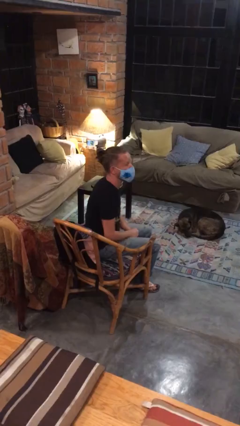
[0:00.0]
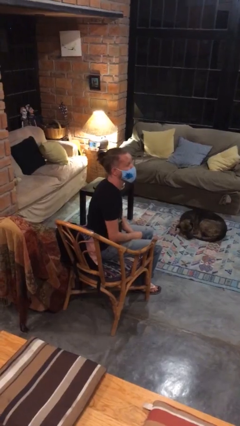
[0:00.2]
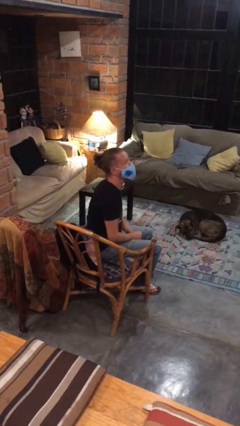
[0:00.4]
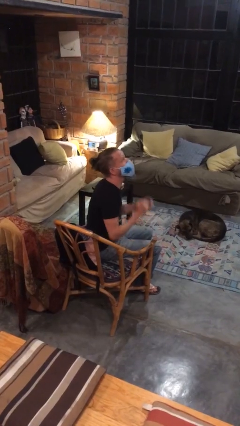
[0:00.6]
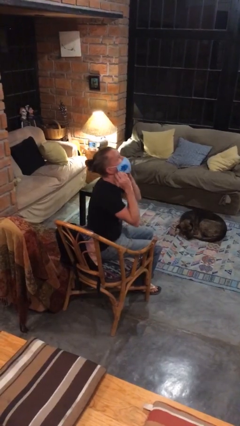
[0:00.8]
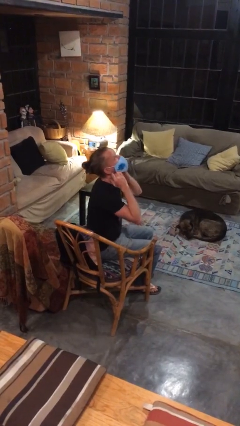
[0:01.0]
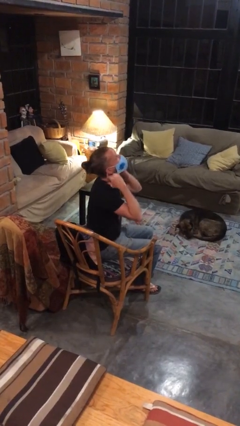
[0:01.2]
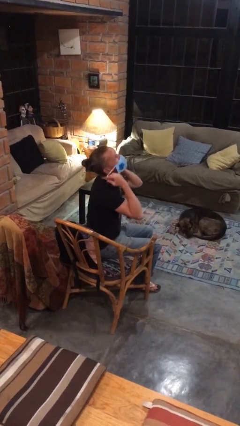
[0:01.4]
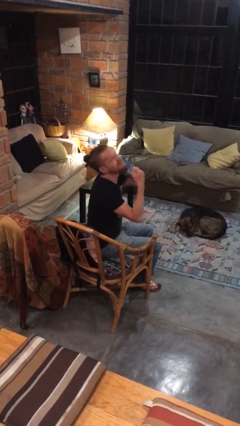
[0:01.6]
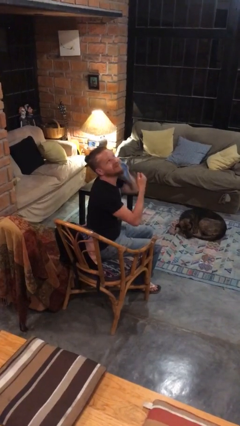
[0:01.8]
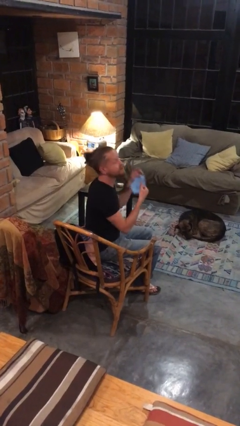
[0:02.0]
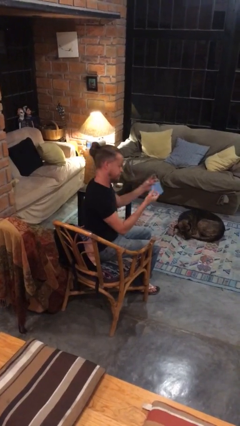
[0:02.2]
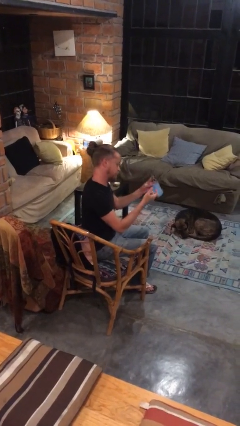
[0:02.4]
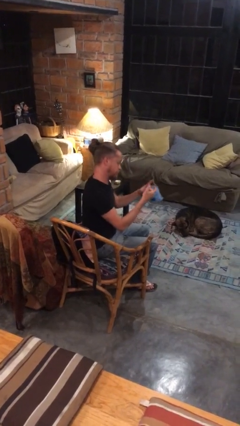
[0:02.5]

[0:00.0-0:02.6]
person takes off facemask

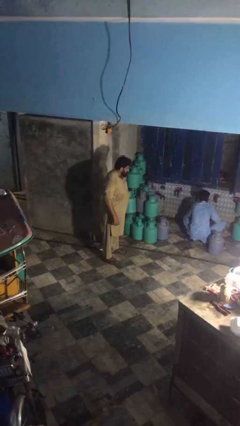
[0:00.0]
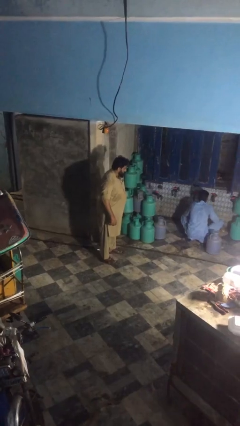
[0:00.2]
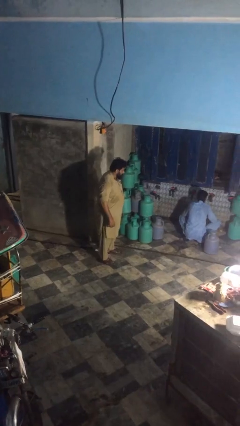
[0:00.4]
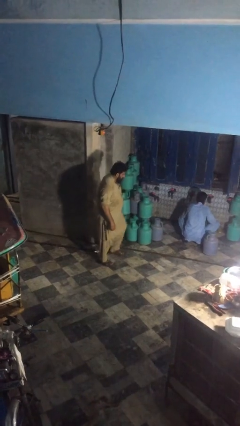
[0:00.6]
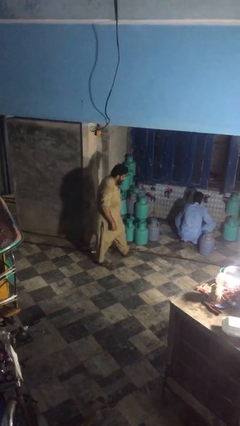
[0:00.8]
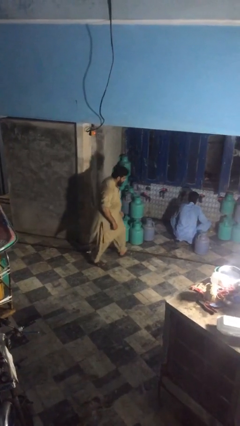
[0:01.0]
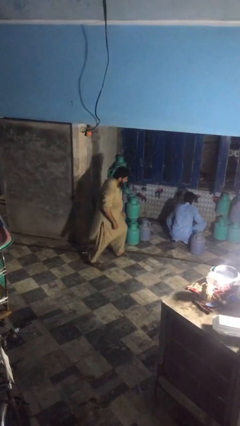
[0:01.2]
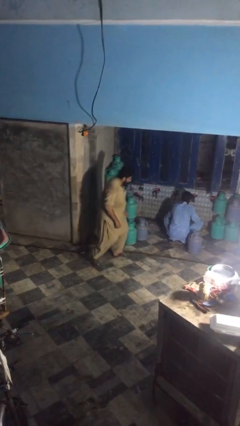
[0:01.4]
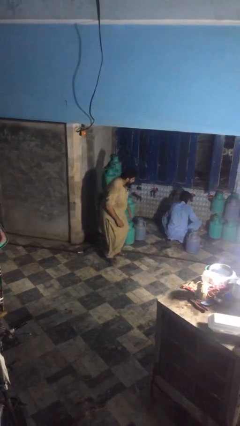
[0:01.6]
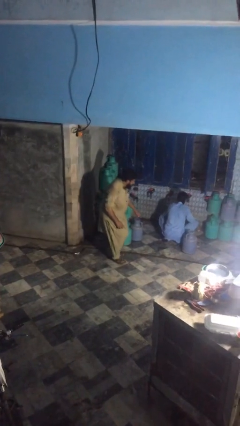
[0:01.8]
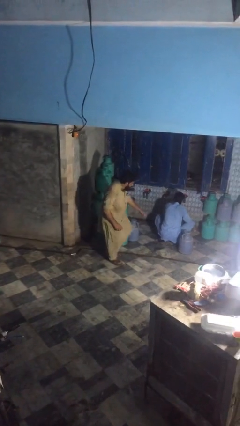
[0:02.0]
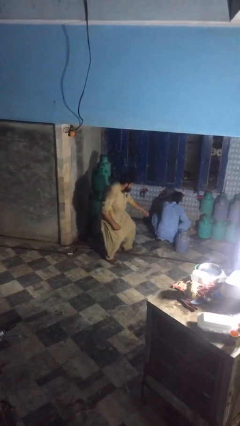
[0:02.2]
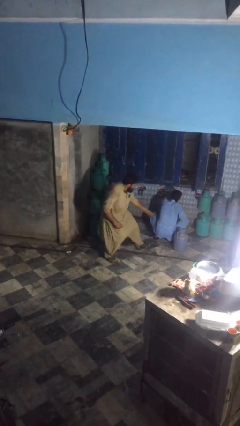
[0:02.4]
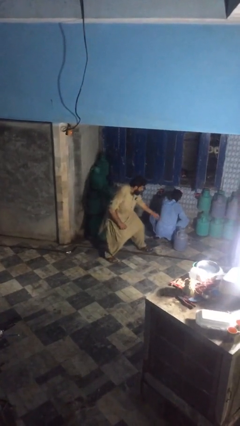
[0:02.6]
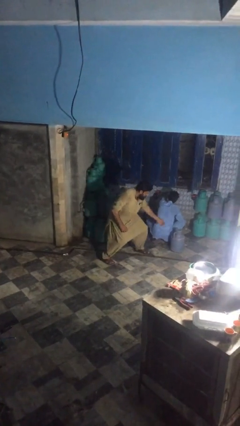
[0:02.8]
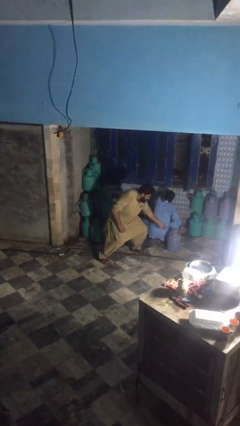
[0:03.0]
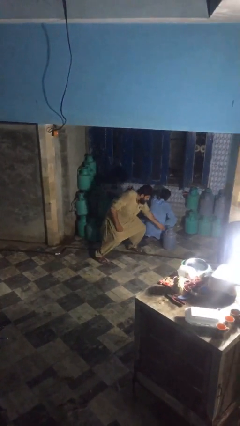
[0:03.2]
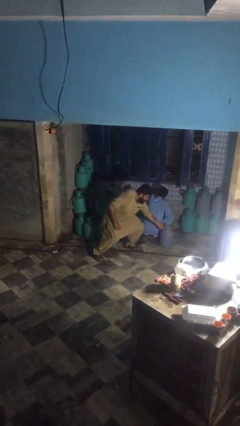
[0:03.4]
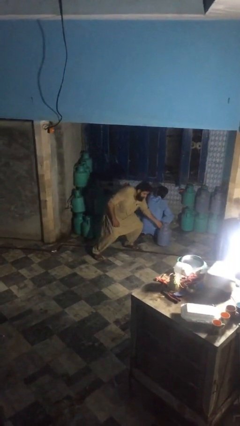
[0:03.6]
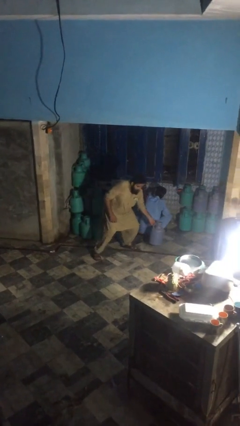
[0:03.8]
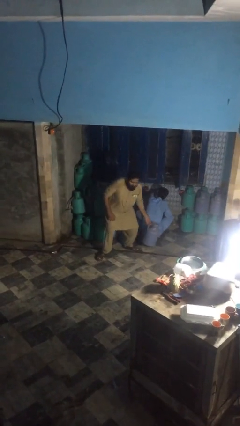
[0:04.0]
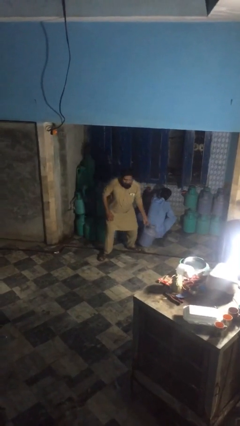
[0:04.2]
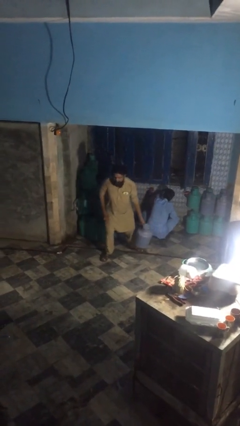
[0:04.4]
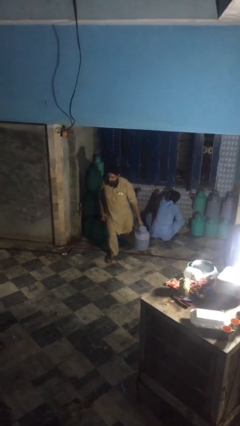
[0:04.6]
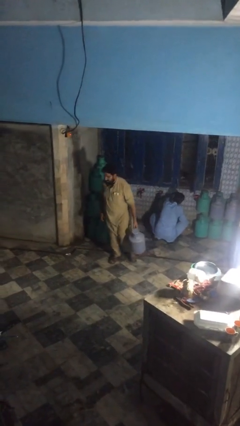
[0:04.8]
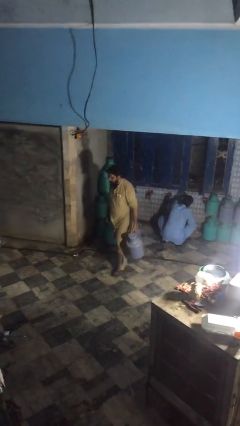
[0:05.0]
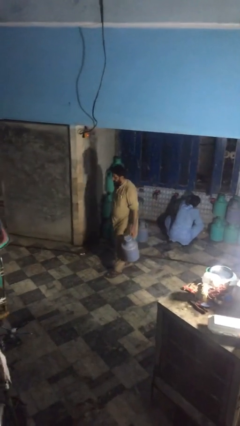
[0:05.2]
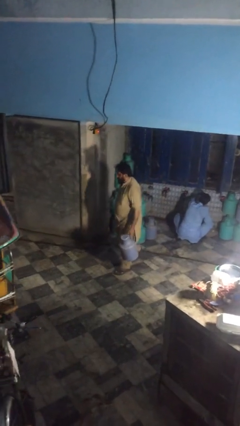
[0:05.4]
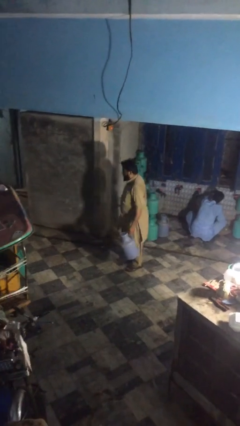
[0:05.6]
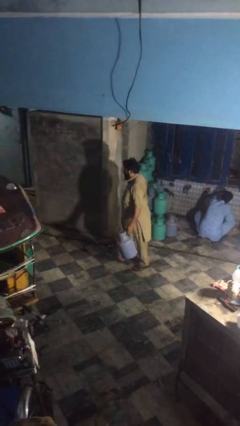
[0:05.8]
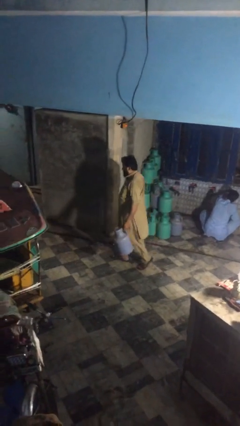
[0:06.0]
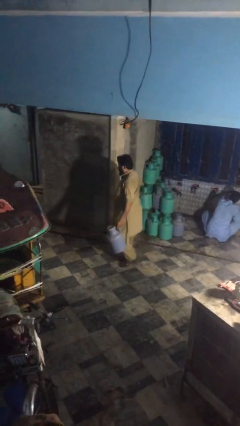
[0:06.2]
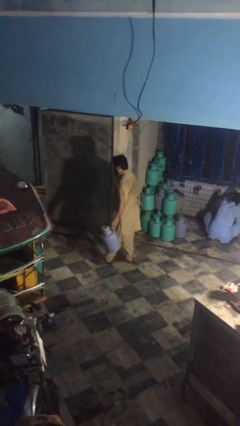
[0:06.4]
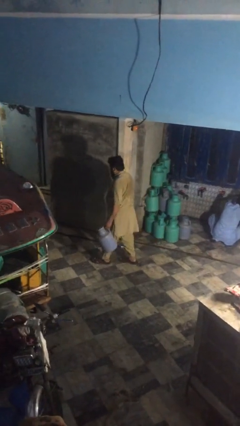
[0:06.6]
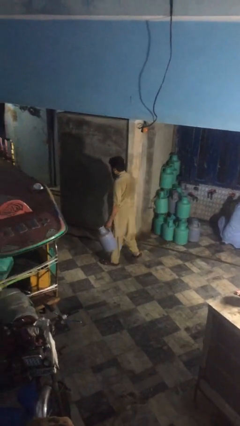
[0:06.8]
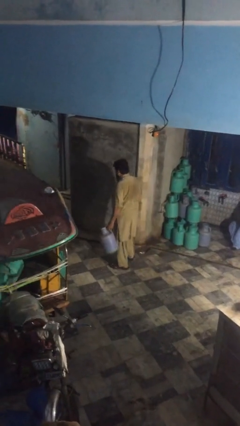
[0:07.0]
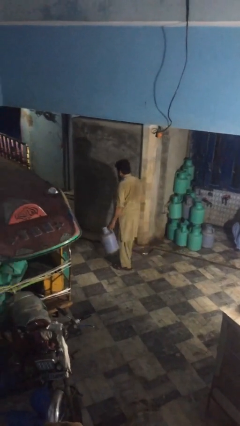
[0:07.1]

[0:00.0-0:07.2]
person steals object from person

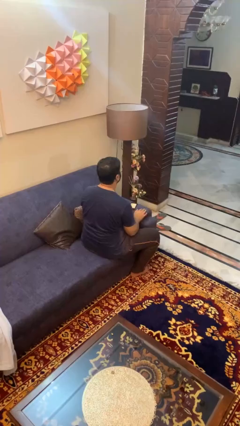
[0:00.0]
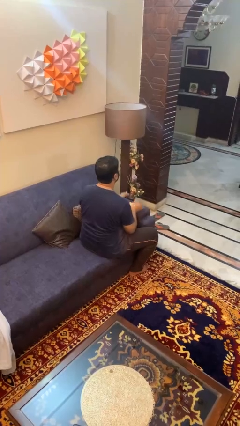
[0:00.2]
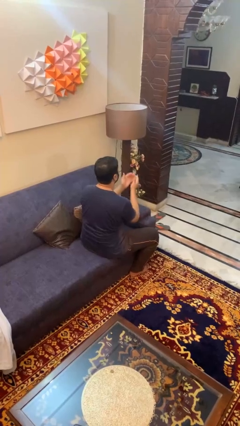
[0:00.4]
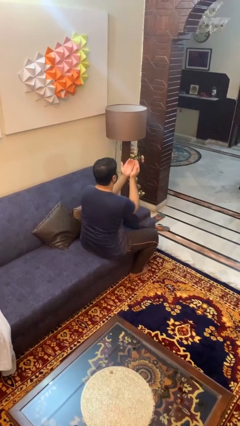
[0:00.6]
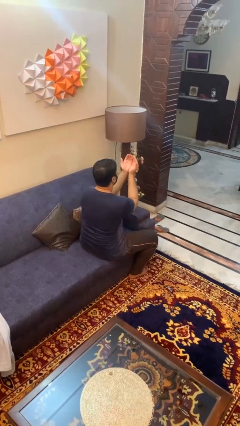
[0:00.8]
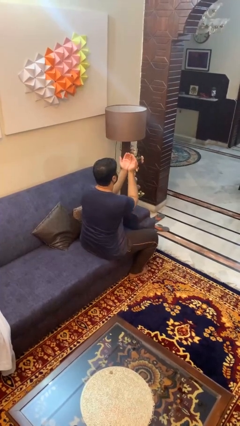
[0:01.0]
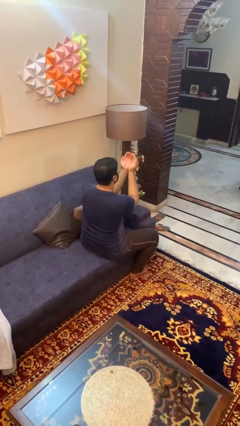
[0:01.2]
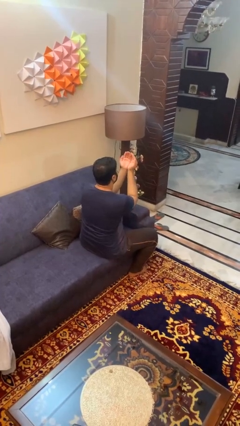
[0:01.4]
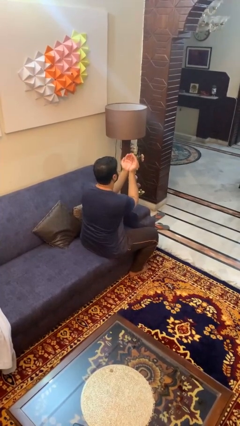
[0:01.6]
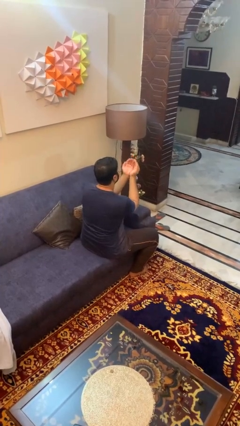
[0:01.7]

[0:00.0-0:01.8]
person prays

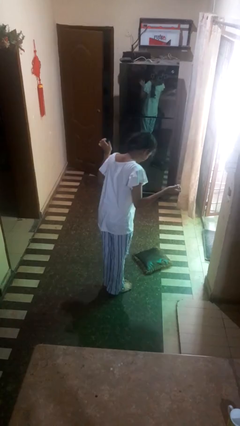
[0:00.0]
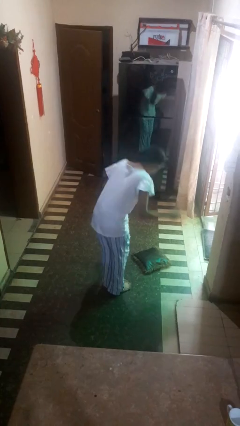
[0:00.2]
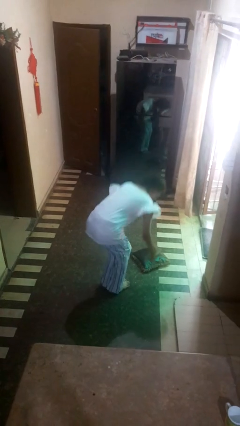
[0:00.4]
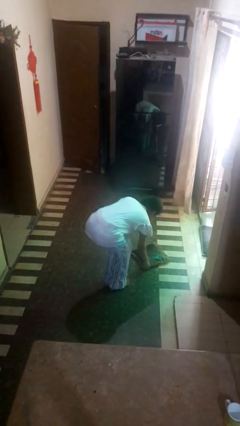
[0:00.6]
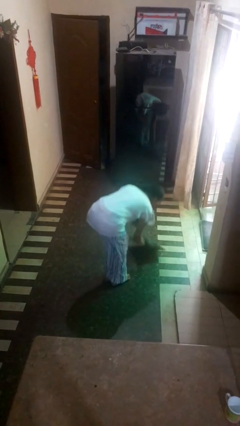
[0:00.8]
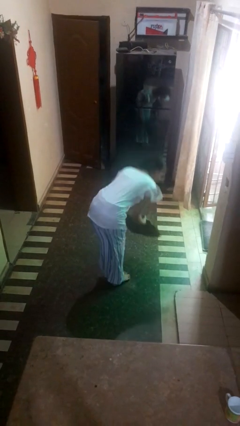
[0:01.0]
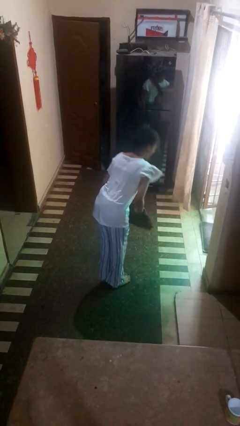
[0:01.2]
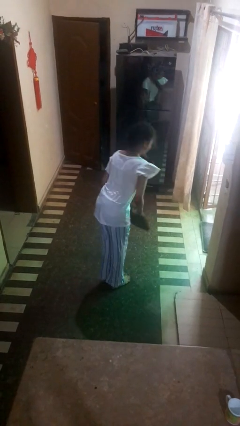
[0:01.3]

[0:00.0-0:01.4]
person picks up object from floor

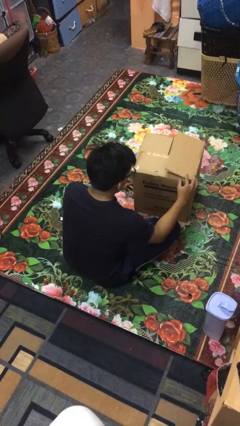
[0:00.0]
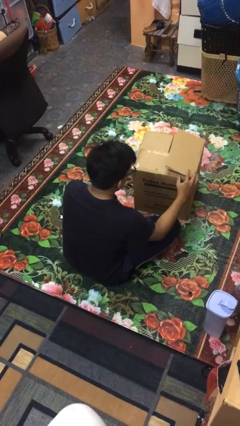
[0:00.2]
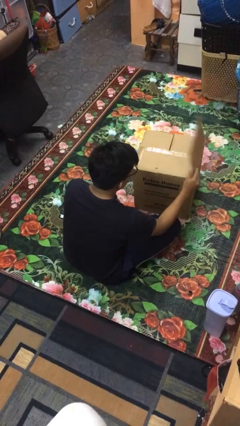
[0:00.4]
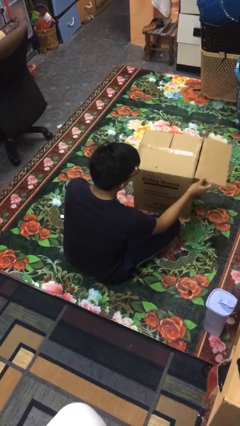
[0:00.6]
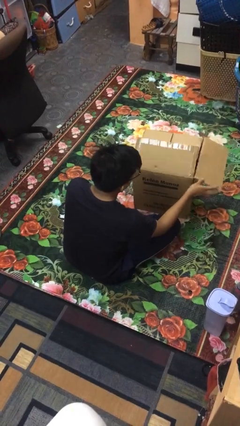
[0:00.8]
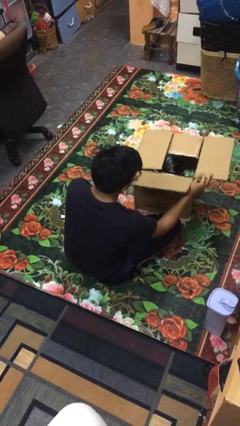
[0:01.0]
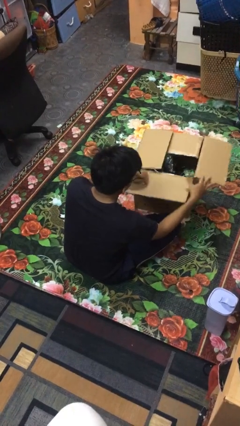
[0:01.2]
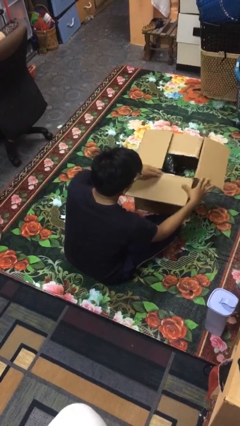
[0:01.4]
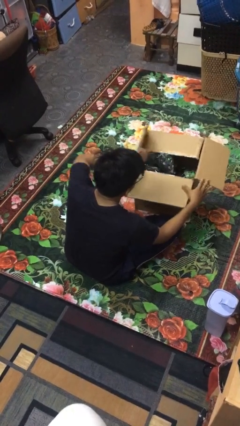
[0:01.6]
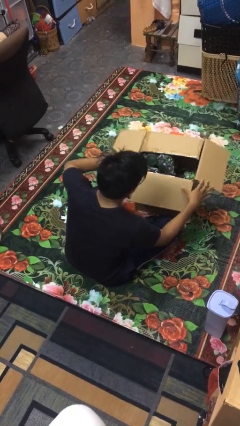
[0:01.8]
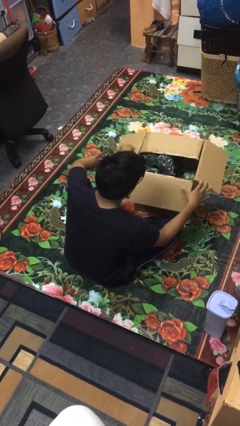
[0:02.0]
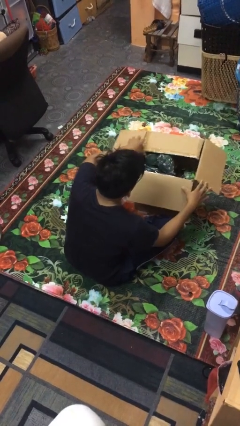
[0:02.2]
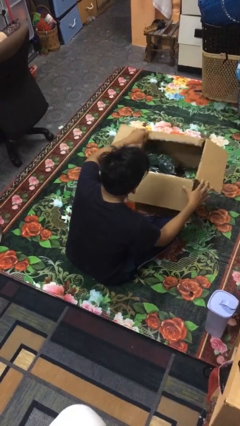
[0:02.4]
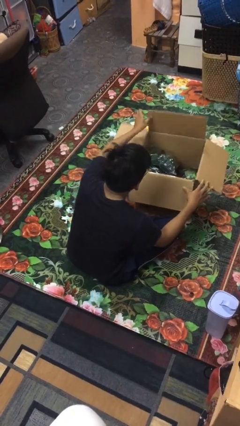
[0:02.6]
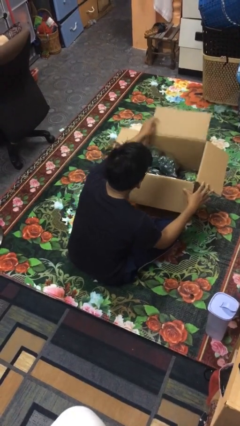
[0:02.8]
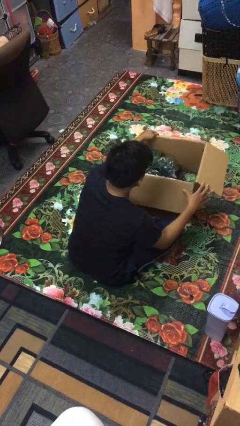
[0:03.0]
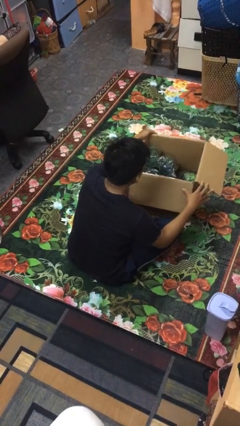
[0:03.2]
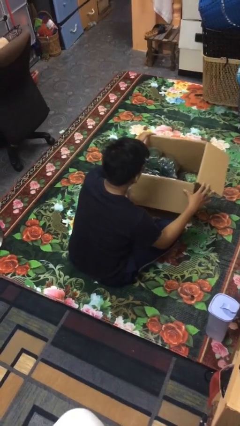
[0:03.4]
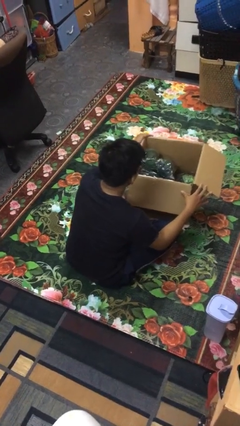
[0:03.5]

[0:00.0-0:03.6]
person opens box

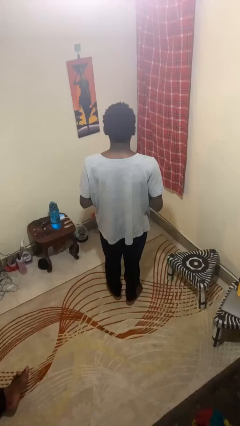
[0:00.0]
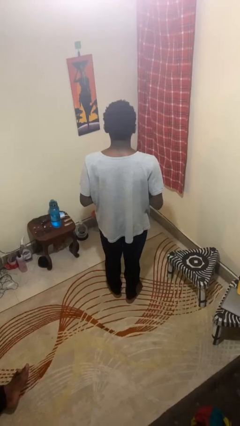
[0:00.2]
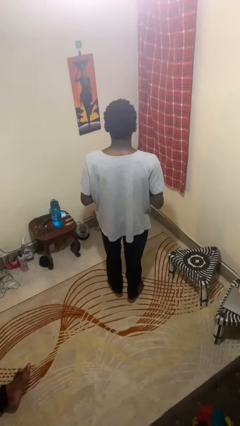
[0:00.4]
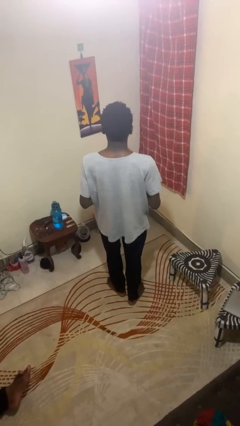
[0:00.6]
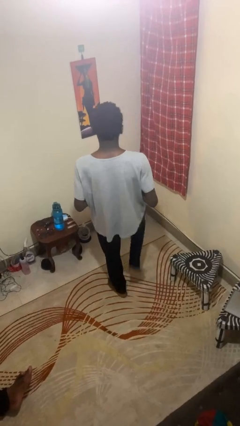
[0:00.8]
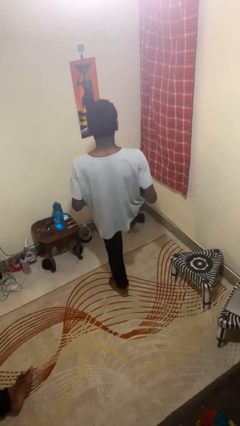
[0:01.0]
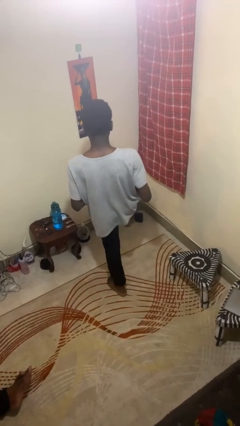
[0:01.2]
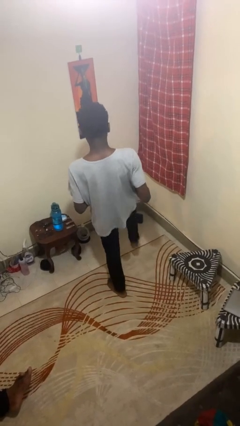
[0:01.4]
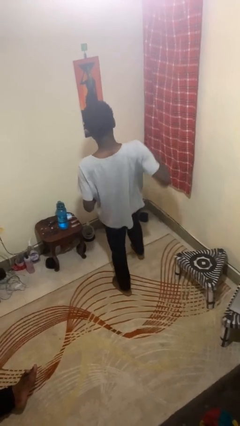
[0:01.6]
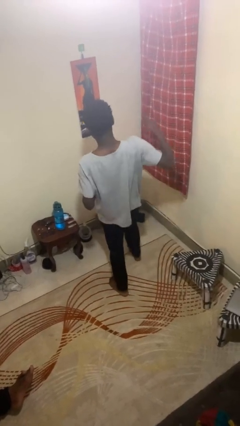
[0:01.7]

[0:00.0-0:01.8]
person karate kicks
